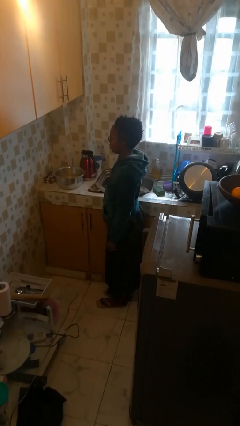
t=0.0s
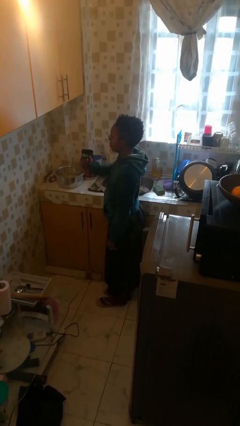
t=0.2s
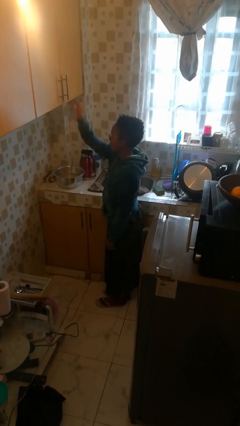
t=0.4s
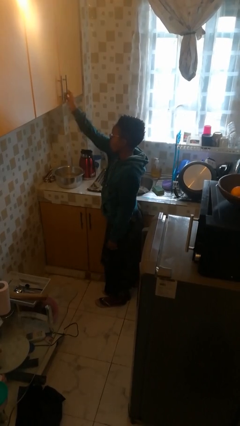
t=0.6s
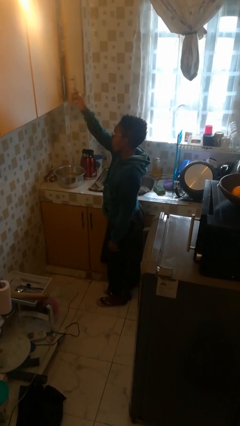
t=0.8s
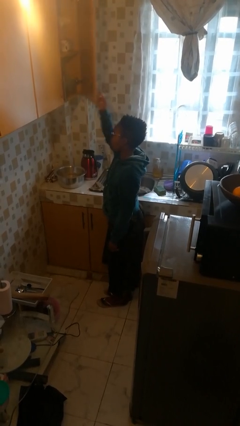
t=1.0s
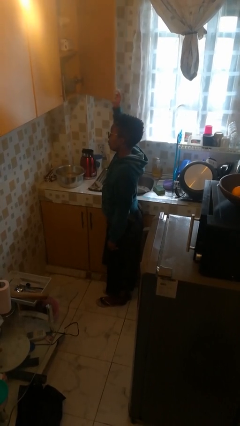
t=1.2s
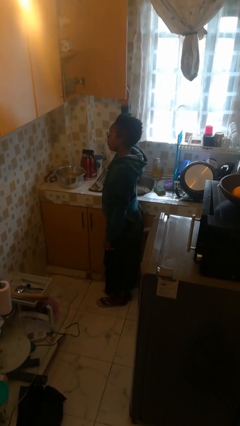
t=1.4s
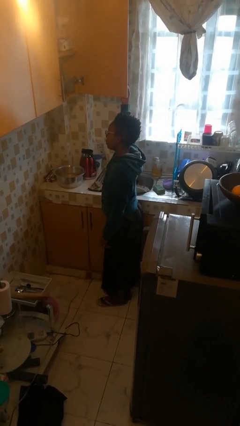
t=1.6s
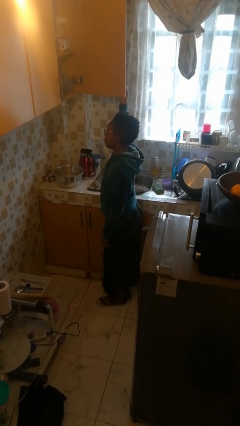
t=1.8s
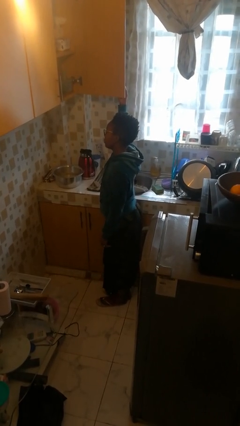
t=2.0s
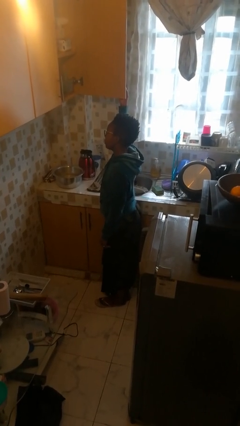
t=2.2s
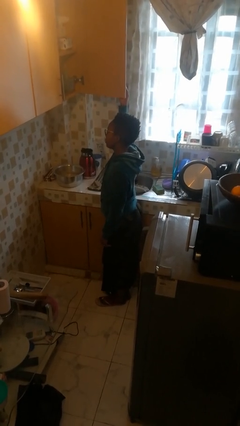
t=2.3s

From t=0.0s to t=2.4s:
person opens cabinet

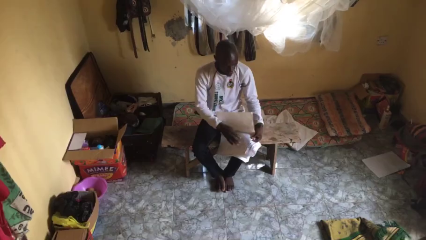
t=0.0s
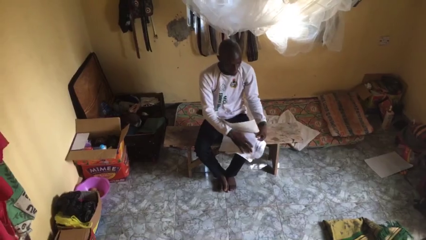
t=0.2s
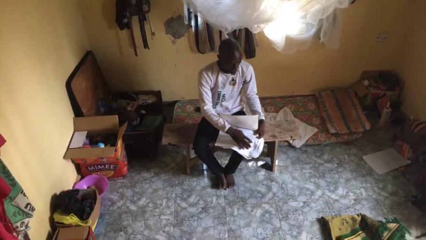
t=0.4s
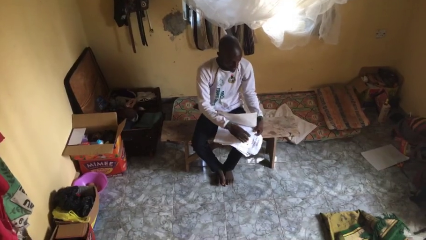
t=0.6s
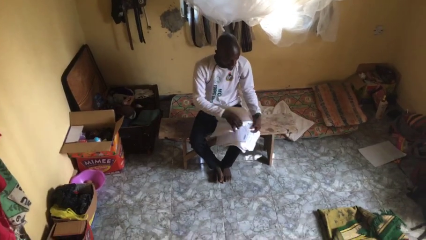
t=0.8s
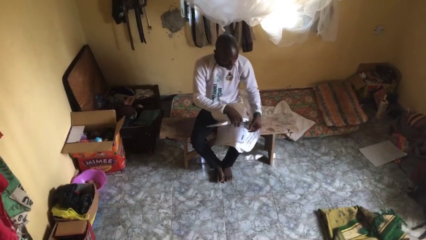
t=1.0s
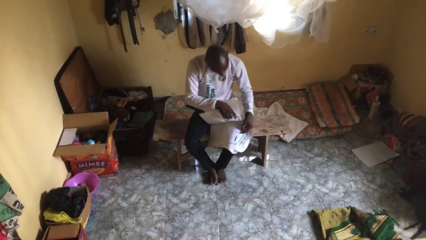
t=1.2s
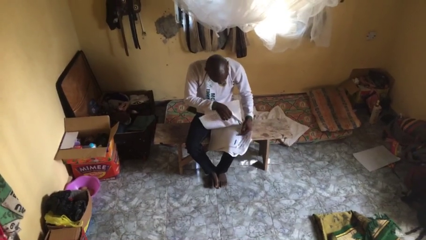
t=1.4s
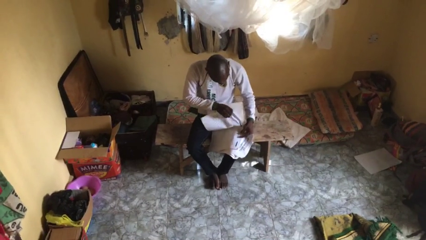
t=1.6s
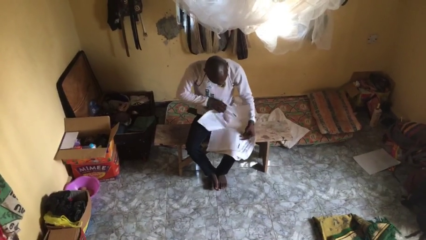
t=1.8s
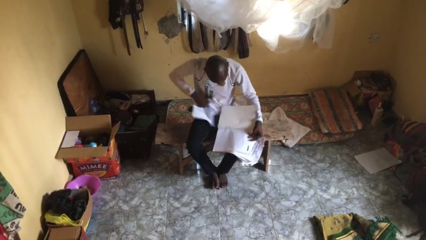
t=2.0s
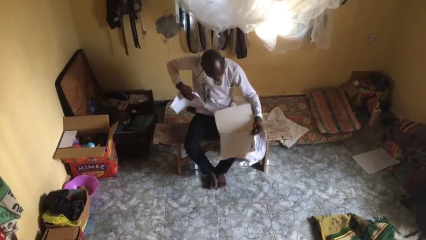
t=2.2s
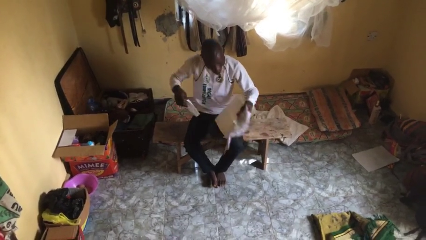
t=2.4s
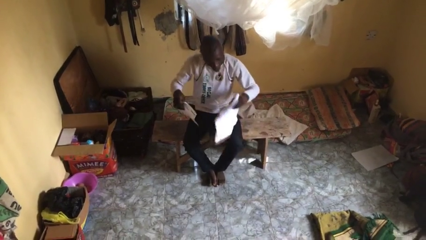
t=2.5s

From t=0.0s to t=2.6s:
person tears paper

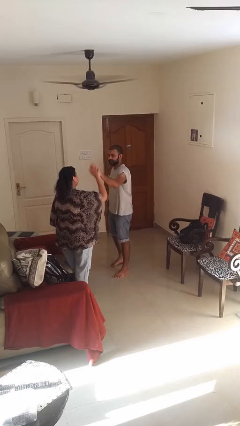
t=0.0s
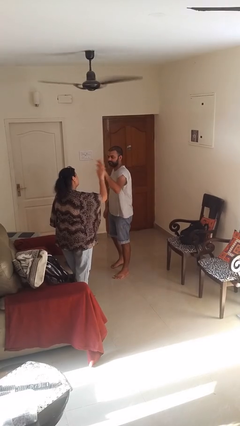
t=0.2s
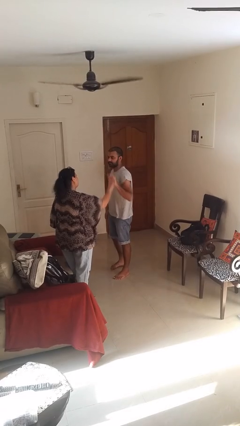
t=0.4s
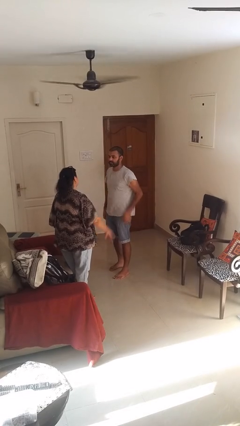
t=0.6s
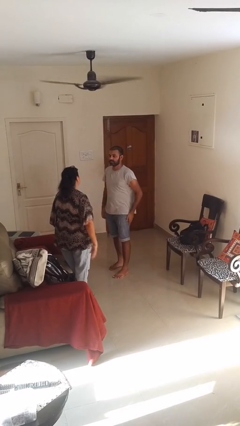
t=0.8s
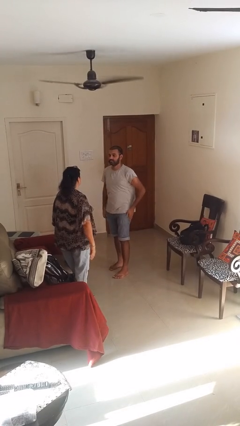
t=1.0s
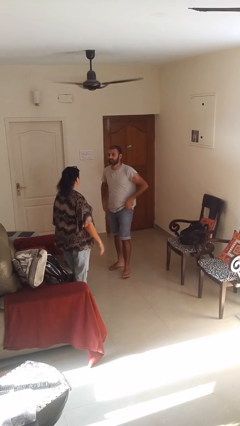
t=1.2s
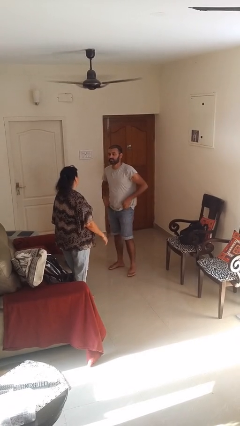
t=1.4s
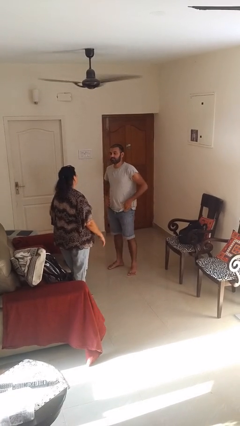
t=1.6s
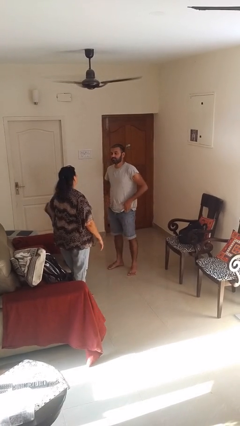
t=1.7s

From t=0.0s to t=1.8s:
person highfives hand

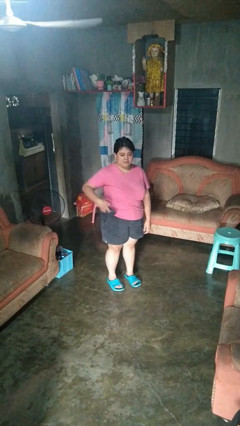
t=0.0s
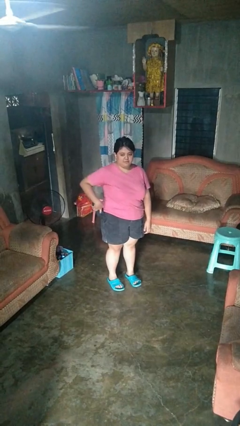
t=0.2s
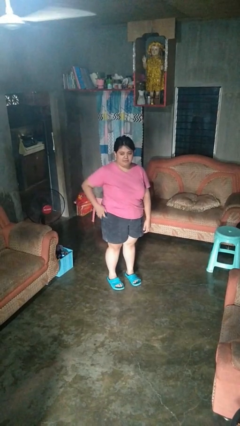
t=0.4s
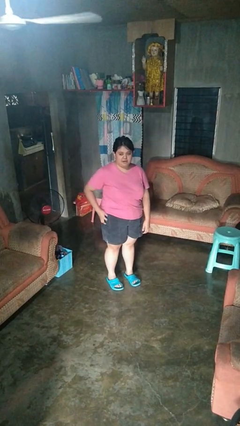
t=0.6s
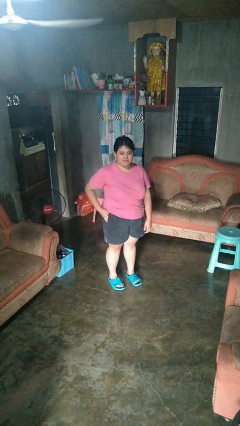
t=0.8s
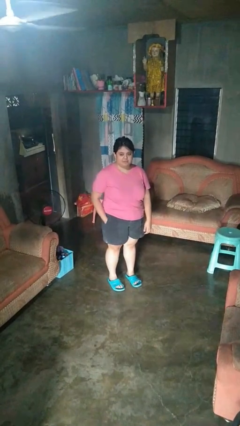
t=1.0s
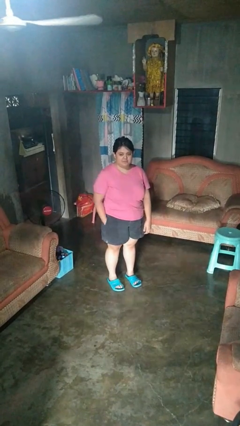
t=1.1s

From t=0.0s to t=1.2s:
person puts phone into pocket

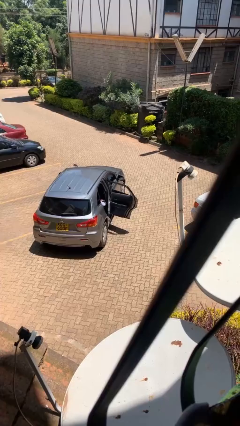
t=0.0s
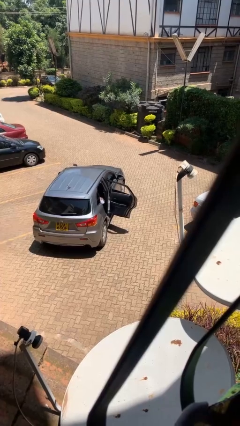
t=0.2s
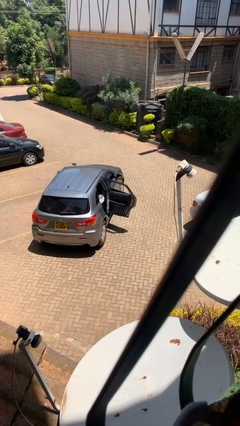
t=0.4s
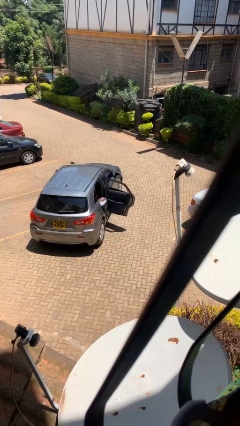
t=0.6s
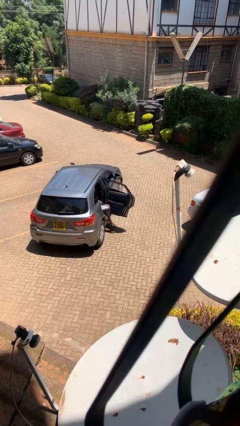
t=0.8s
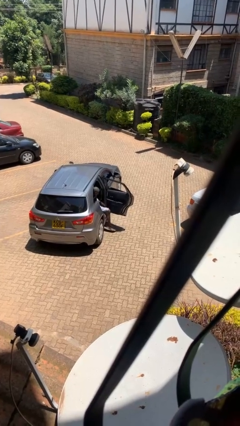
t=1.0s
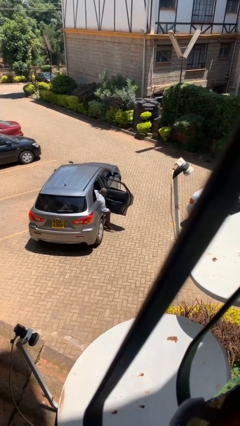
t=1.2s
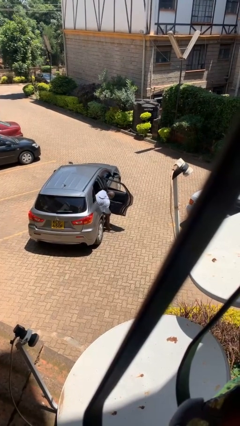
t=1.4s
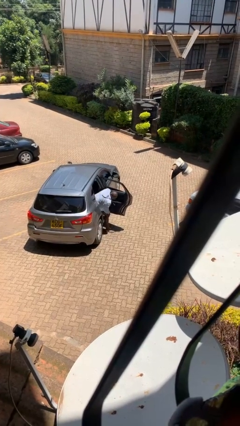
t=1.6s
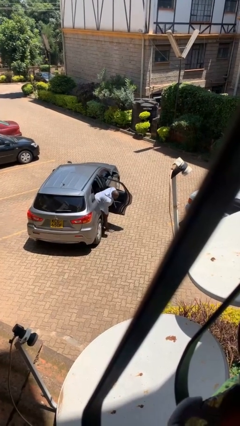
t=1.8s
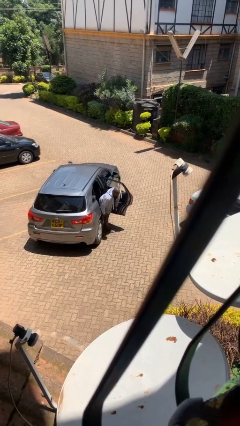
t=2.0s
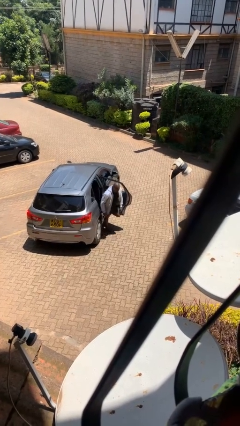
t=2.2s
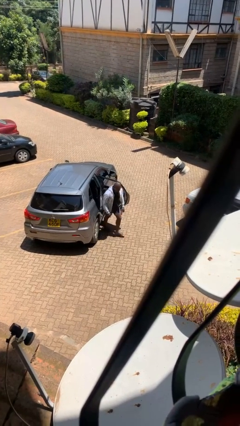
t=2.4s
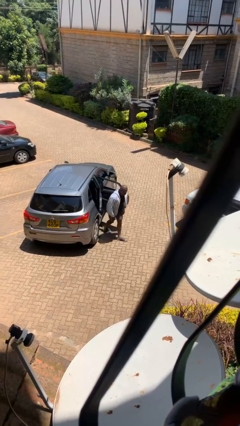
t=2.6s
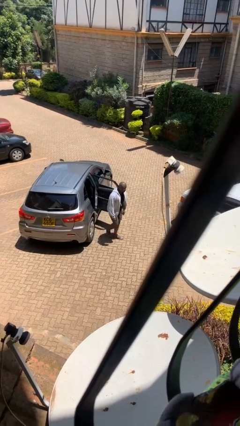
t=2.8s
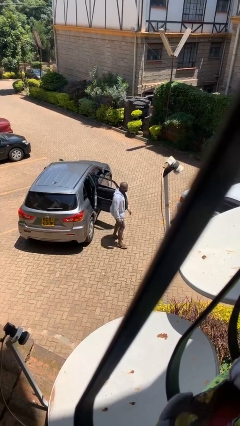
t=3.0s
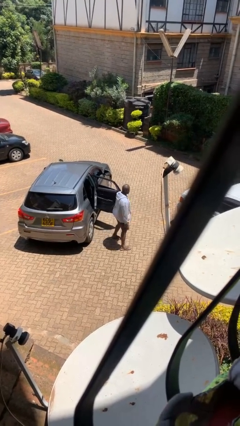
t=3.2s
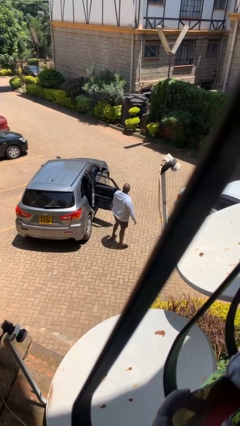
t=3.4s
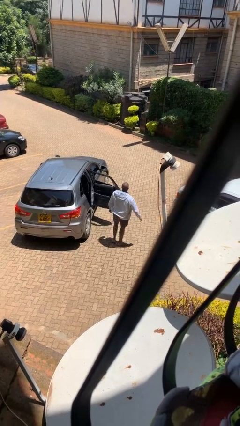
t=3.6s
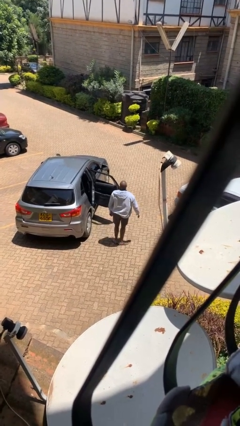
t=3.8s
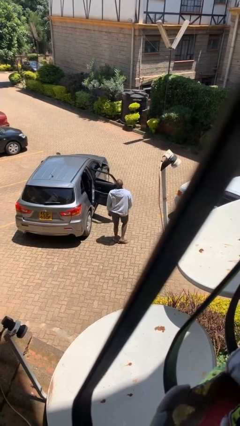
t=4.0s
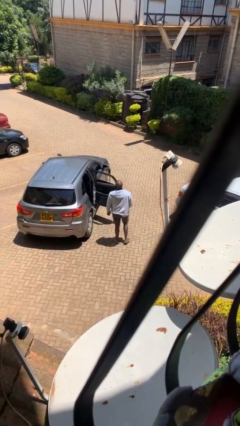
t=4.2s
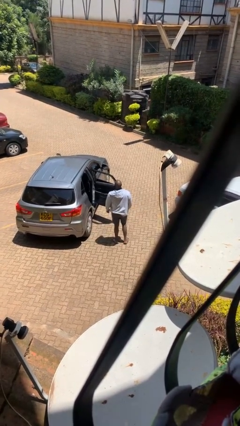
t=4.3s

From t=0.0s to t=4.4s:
person exits car

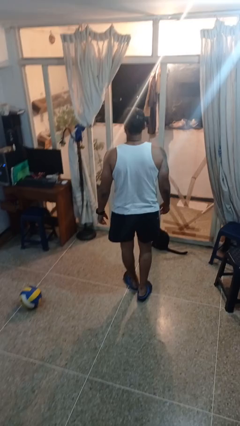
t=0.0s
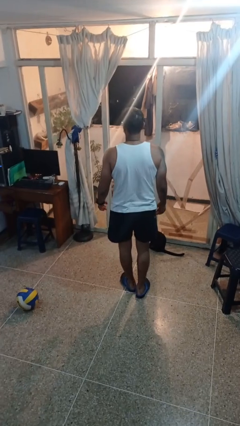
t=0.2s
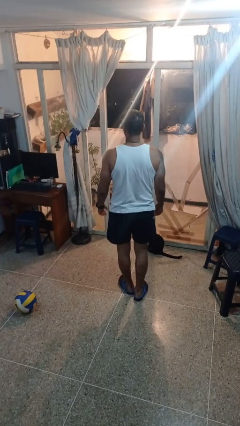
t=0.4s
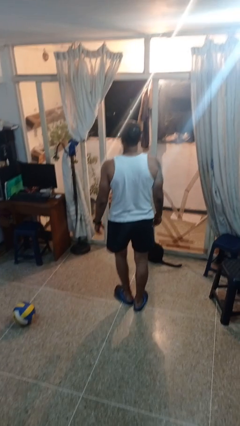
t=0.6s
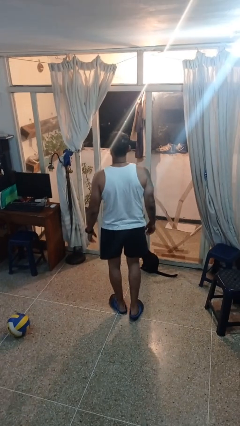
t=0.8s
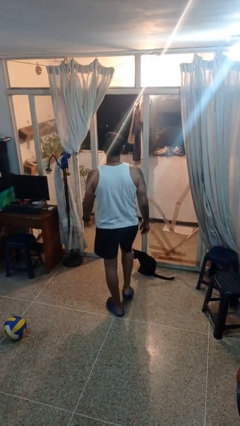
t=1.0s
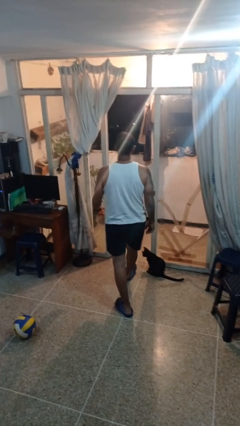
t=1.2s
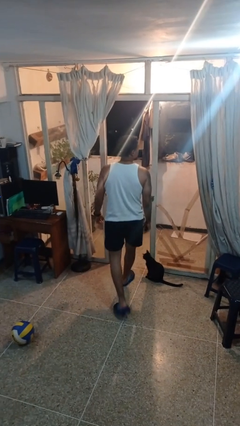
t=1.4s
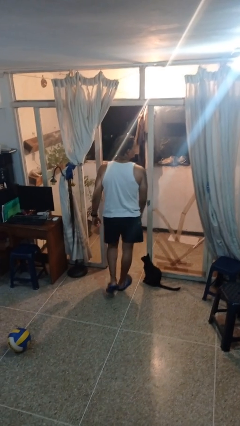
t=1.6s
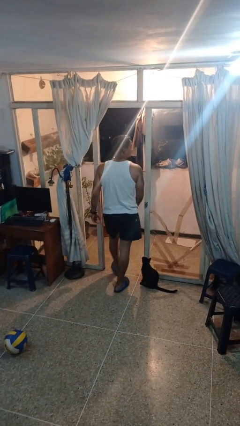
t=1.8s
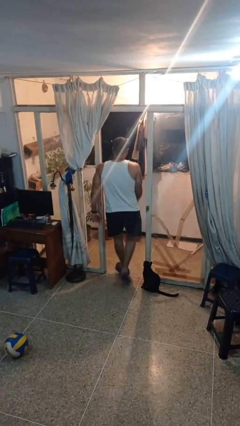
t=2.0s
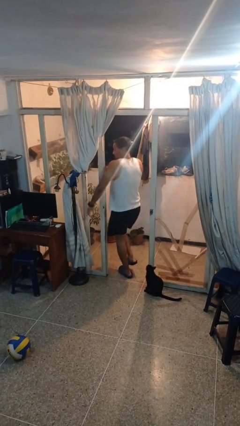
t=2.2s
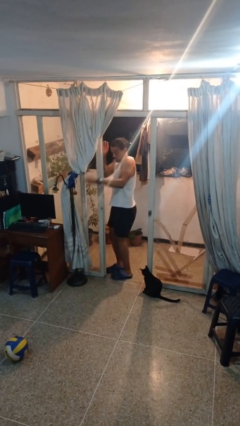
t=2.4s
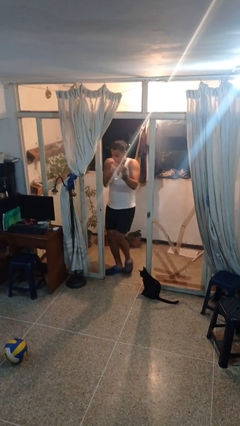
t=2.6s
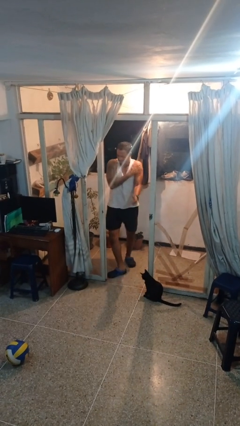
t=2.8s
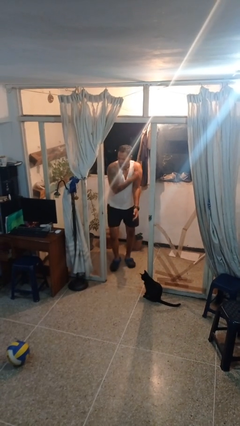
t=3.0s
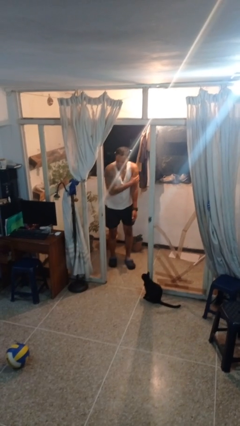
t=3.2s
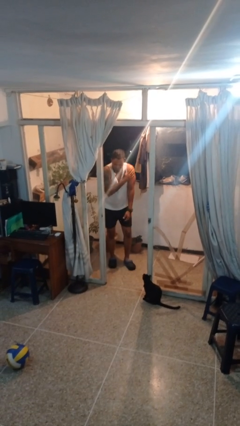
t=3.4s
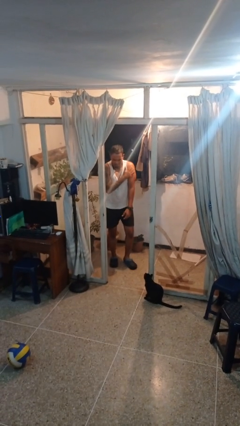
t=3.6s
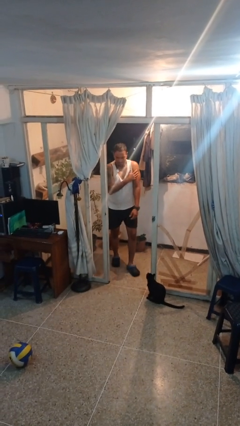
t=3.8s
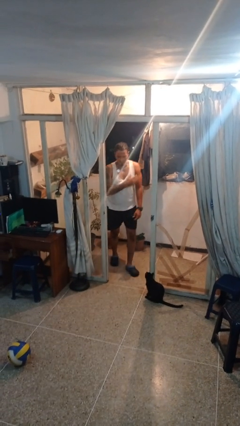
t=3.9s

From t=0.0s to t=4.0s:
person bumps into wall

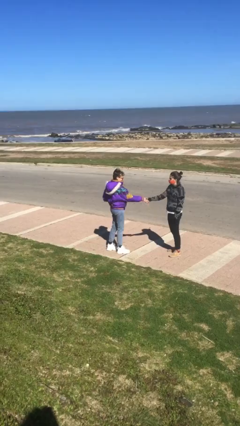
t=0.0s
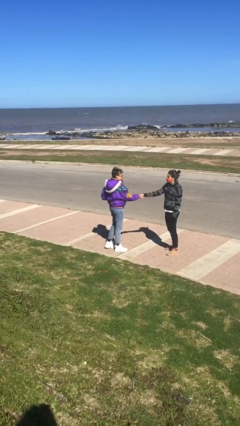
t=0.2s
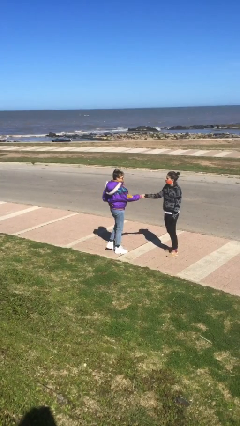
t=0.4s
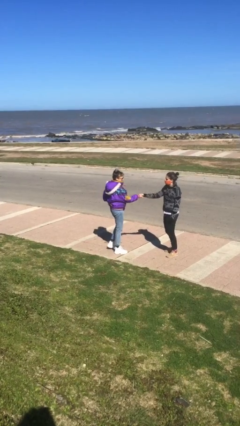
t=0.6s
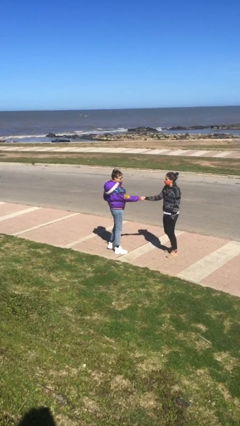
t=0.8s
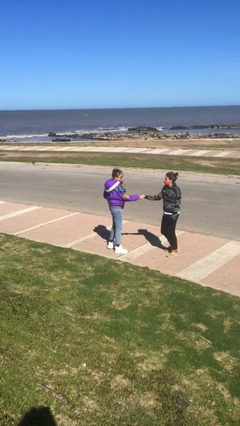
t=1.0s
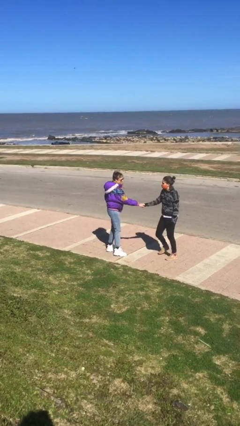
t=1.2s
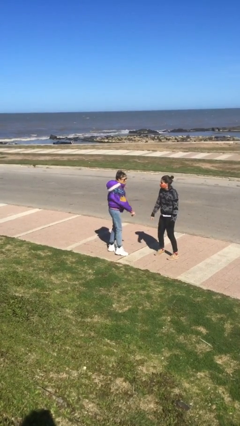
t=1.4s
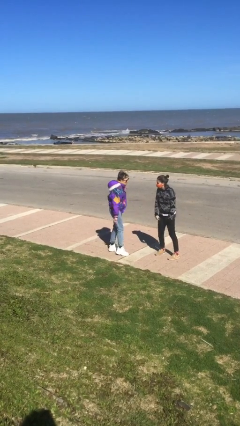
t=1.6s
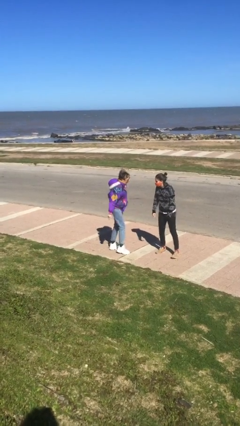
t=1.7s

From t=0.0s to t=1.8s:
person shakes hand
